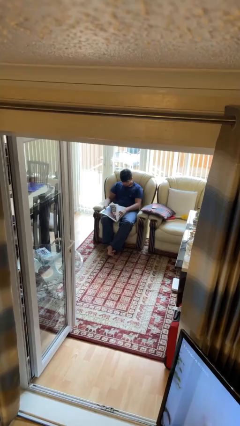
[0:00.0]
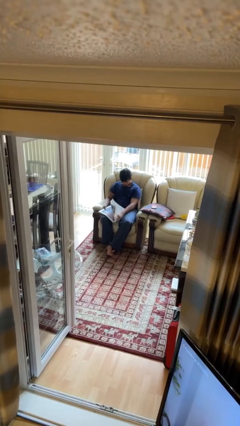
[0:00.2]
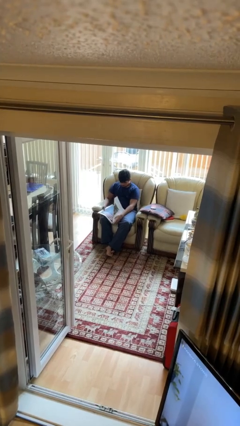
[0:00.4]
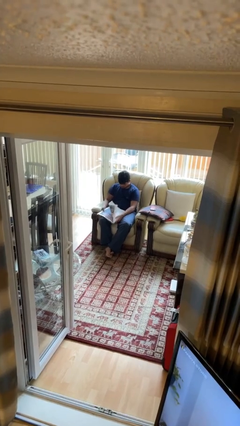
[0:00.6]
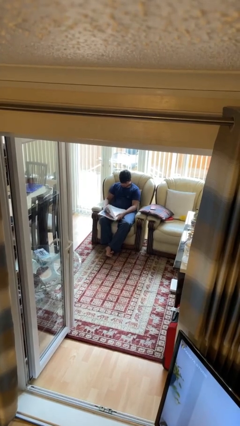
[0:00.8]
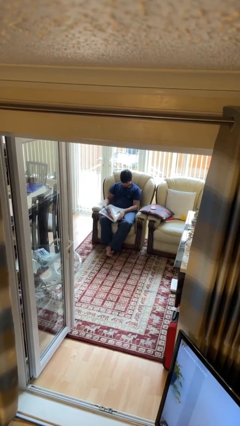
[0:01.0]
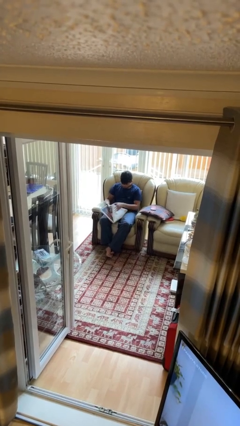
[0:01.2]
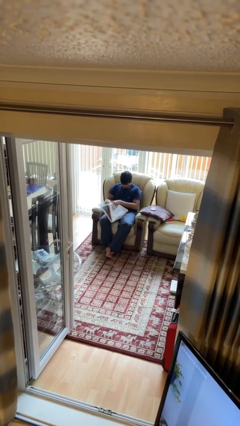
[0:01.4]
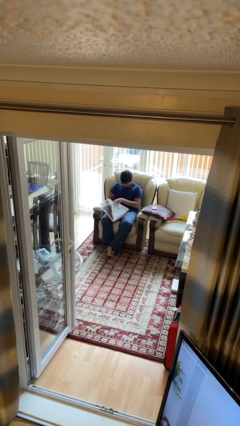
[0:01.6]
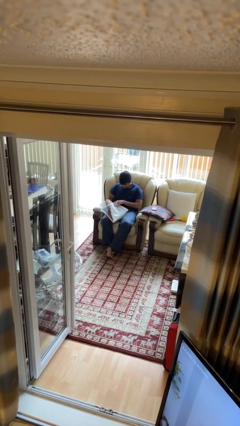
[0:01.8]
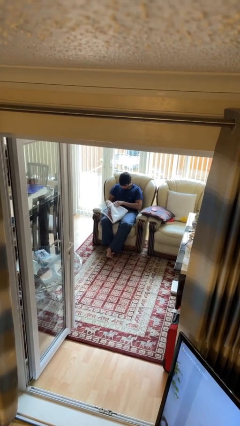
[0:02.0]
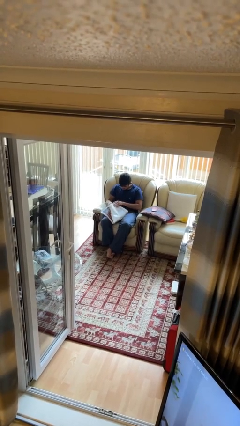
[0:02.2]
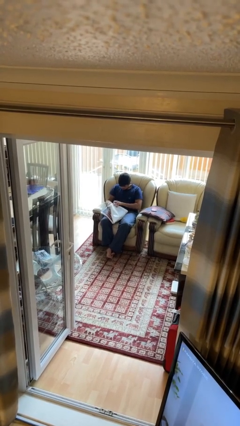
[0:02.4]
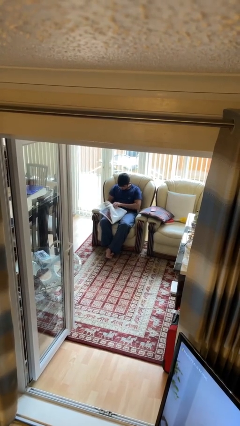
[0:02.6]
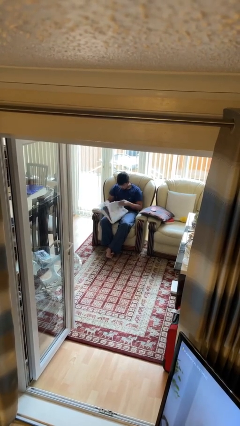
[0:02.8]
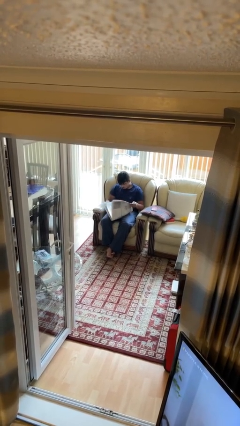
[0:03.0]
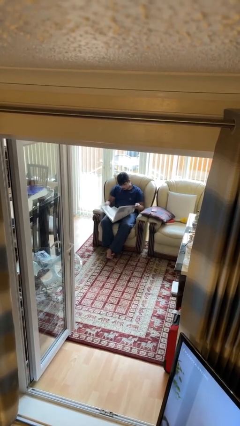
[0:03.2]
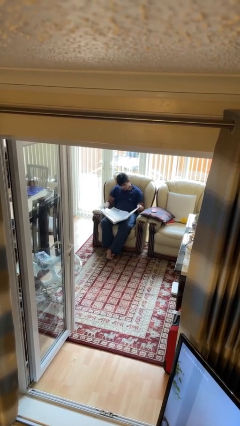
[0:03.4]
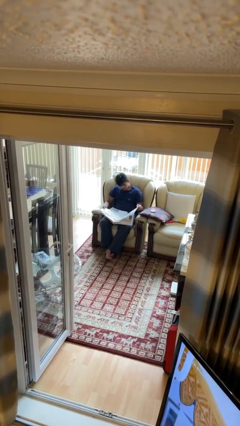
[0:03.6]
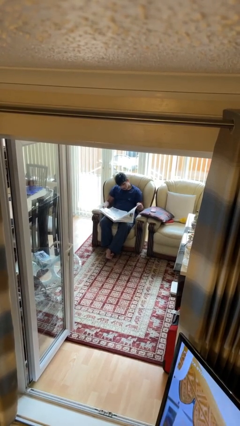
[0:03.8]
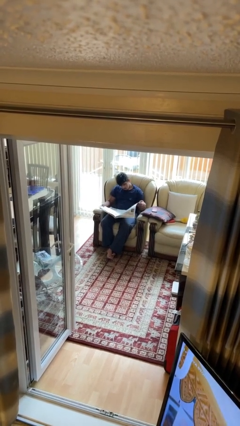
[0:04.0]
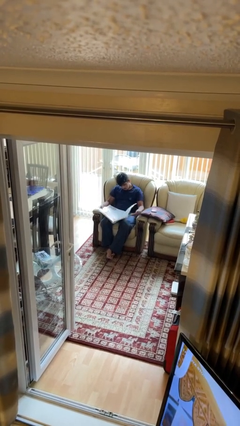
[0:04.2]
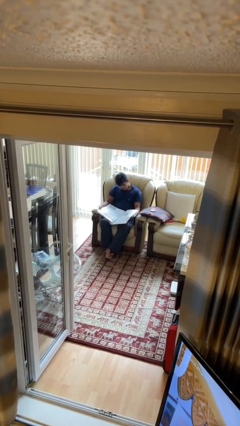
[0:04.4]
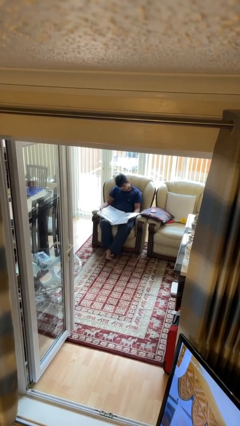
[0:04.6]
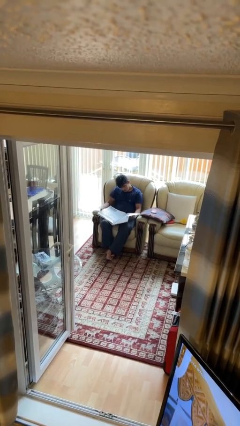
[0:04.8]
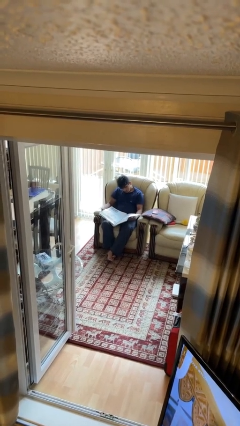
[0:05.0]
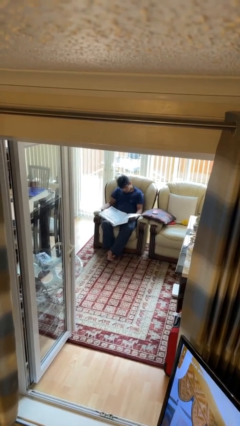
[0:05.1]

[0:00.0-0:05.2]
person reads newspaper

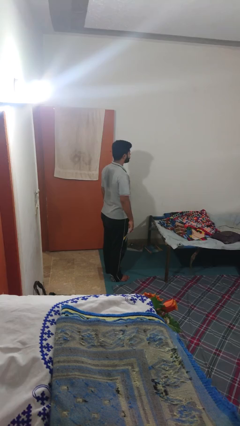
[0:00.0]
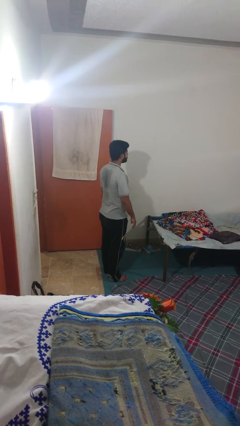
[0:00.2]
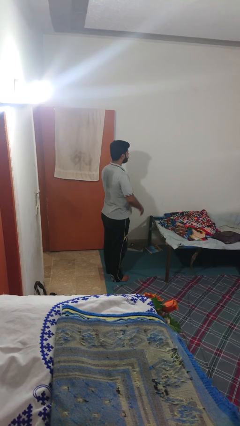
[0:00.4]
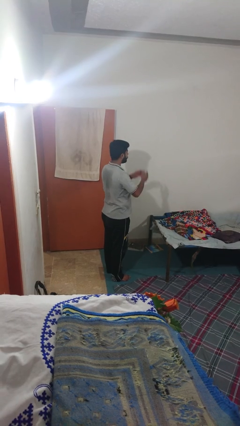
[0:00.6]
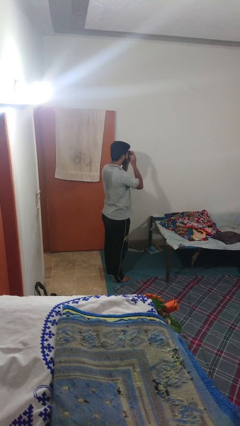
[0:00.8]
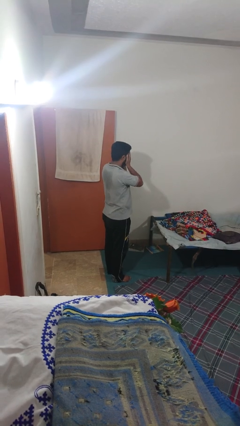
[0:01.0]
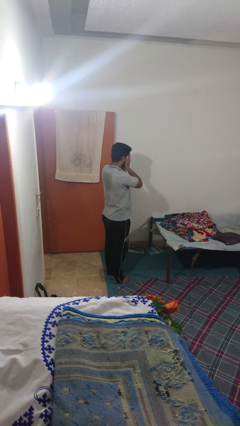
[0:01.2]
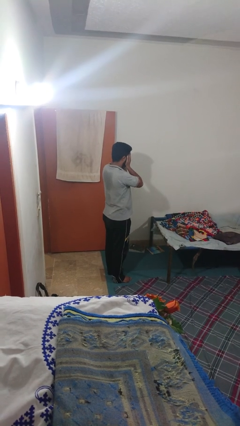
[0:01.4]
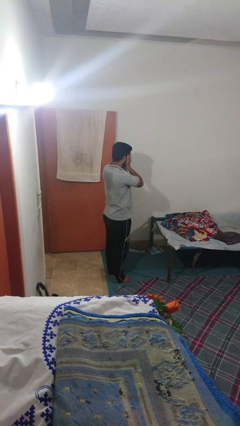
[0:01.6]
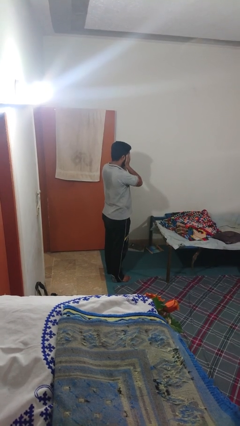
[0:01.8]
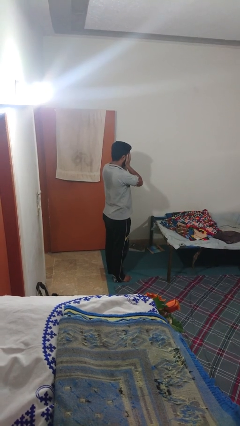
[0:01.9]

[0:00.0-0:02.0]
person covers face with hands

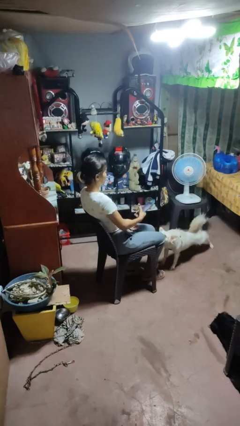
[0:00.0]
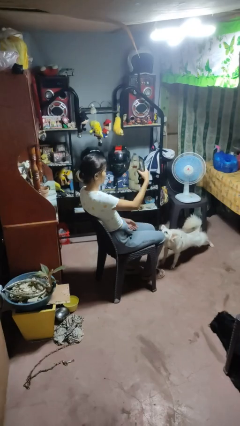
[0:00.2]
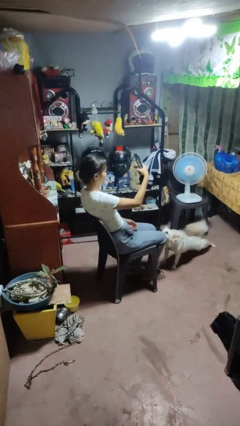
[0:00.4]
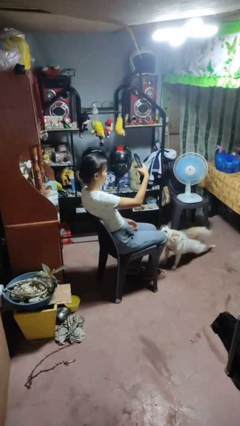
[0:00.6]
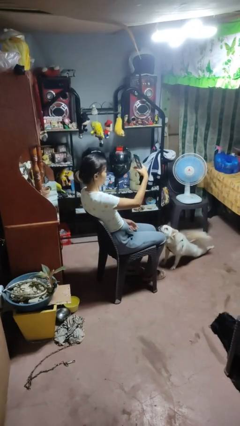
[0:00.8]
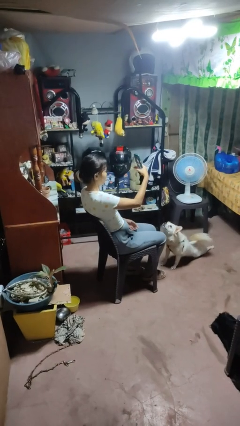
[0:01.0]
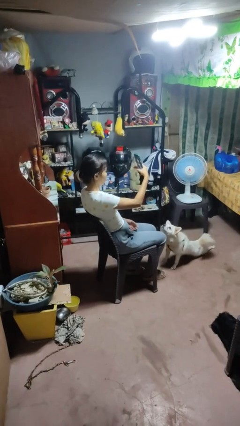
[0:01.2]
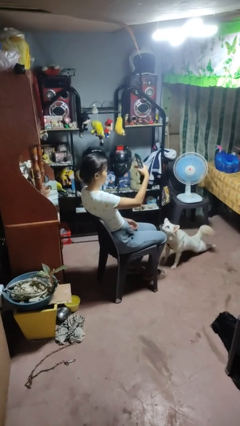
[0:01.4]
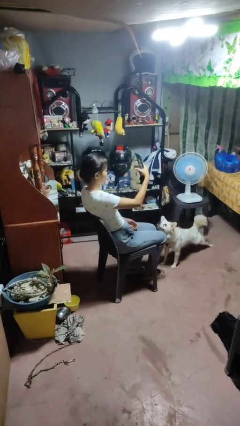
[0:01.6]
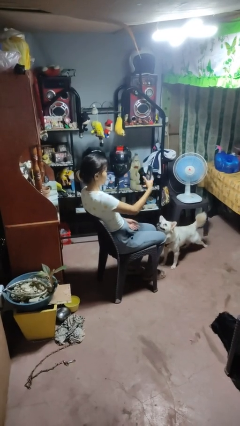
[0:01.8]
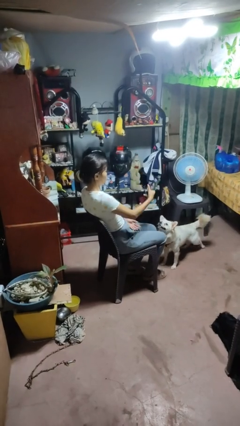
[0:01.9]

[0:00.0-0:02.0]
person takes selfie

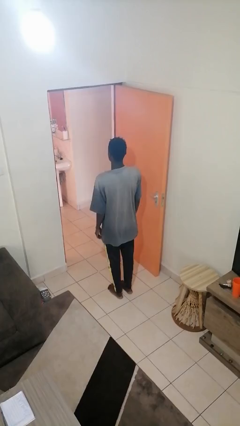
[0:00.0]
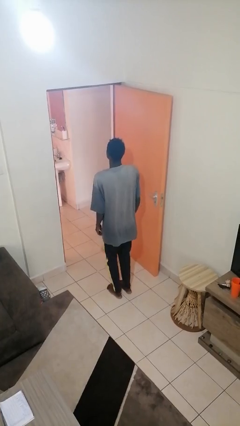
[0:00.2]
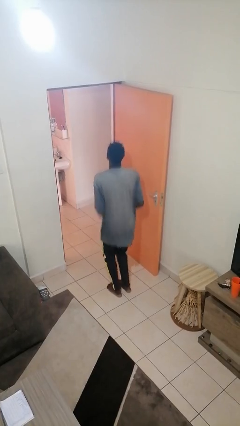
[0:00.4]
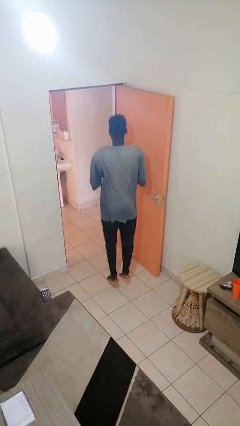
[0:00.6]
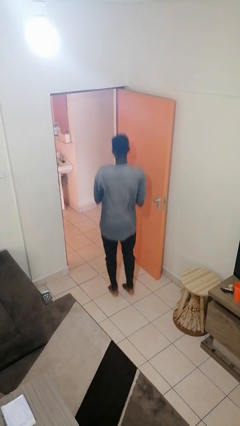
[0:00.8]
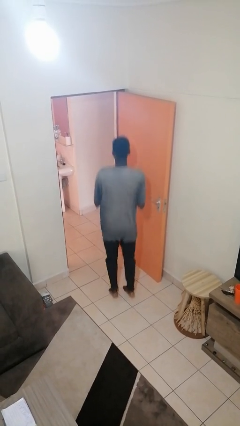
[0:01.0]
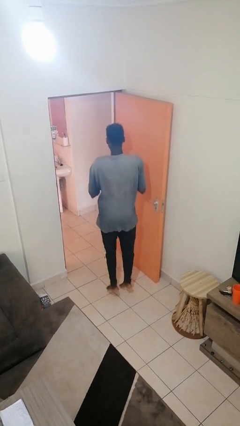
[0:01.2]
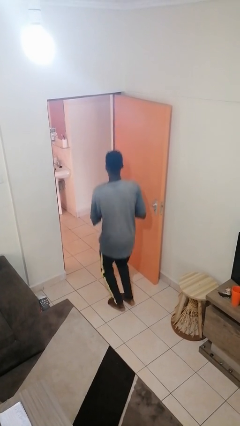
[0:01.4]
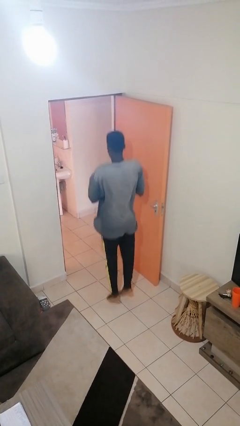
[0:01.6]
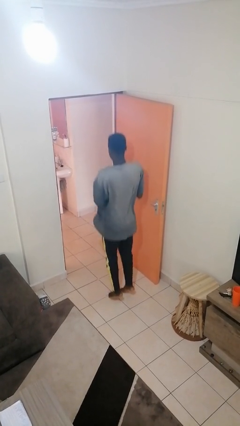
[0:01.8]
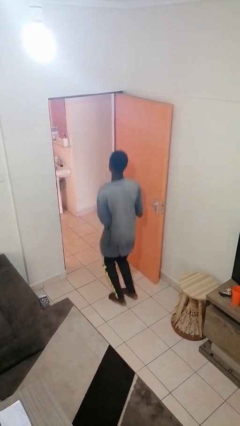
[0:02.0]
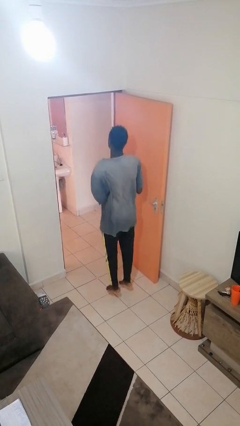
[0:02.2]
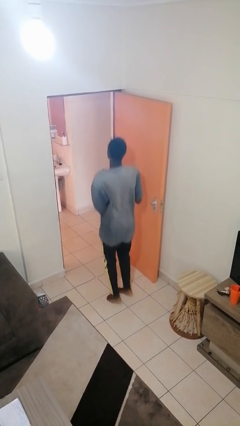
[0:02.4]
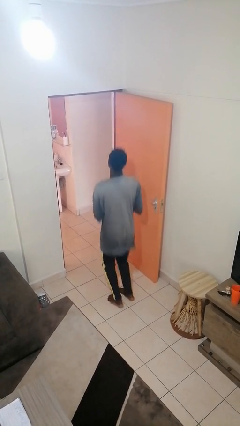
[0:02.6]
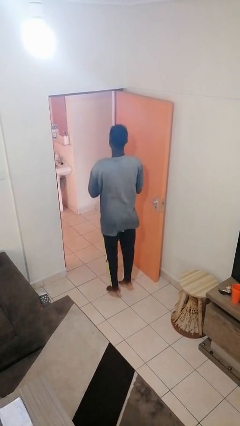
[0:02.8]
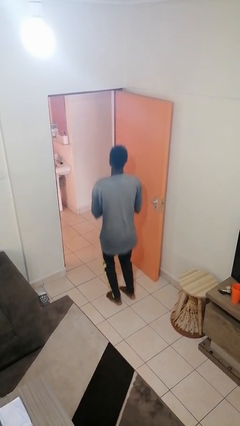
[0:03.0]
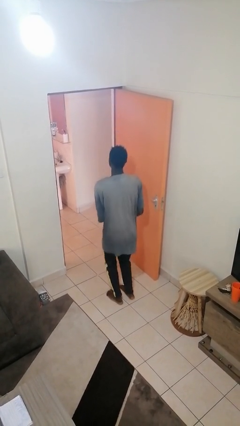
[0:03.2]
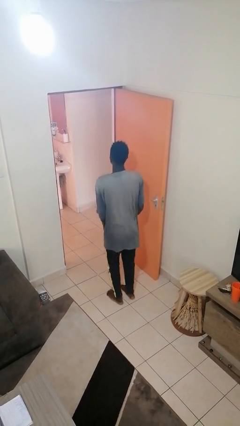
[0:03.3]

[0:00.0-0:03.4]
person jumps

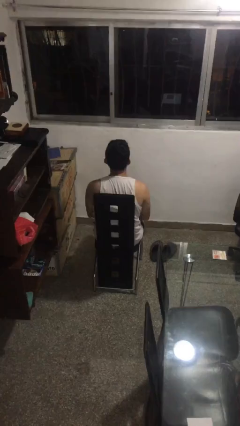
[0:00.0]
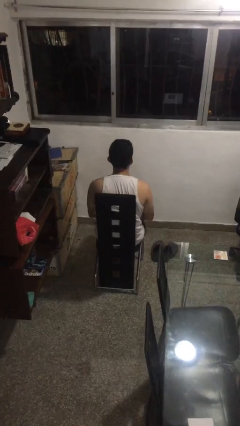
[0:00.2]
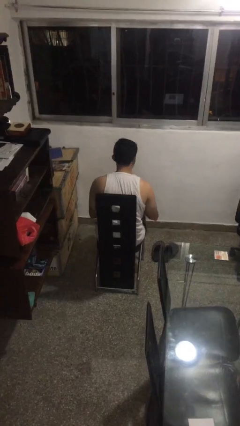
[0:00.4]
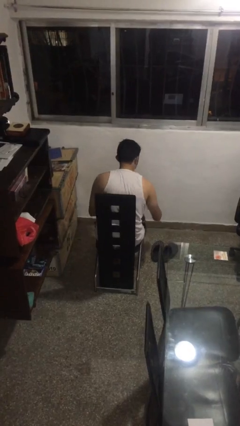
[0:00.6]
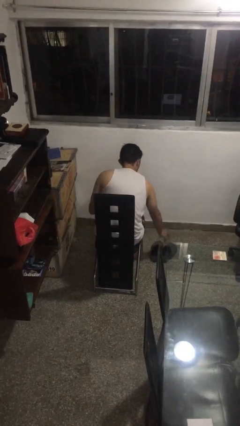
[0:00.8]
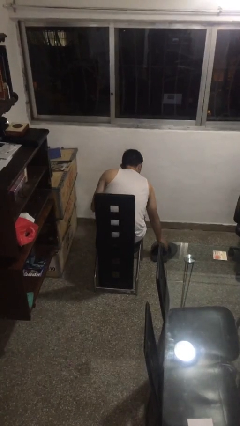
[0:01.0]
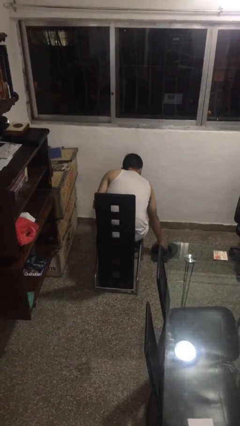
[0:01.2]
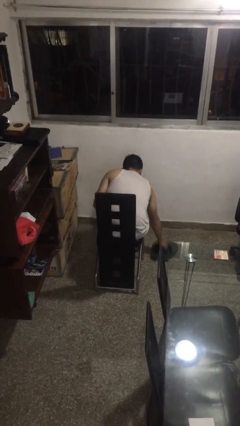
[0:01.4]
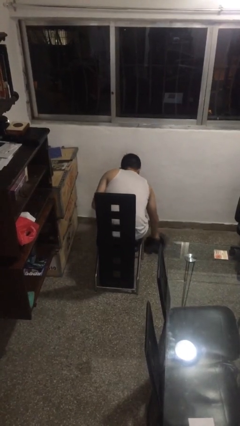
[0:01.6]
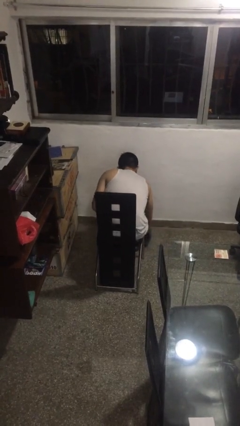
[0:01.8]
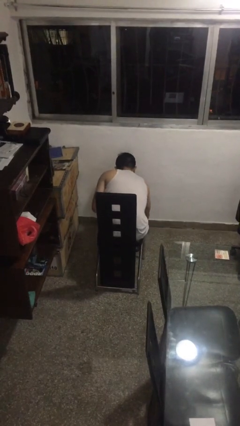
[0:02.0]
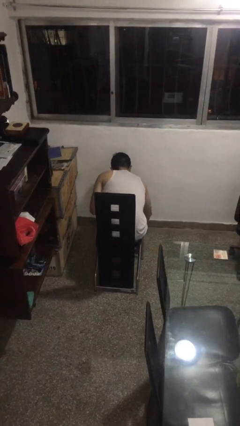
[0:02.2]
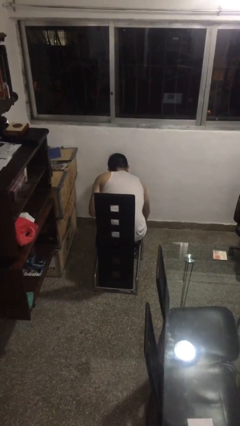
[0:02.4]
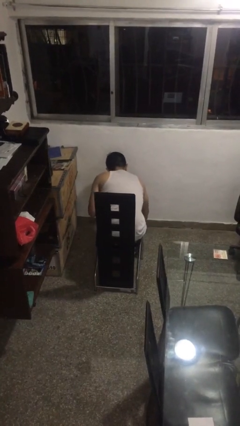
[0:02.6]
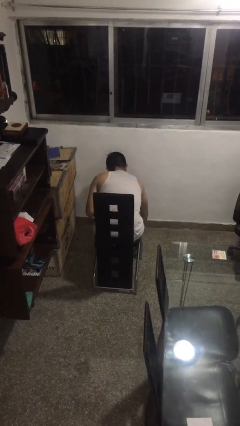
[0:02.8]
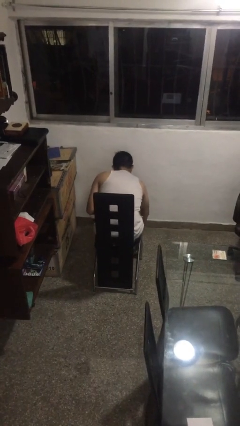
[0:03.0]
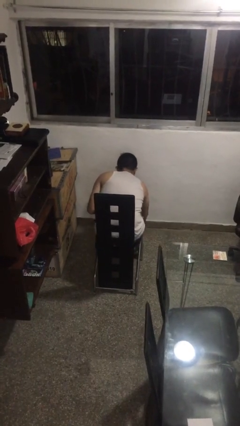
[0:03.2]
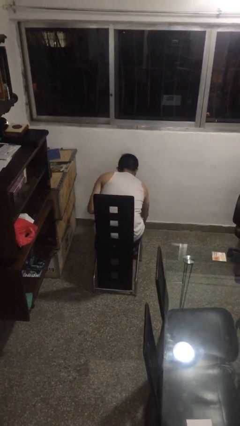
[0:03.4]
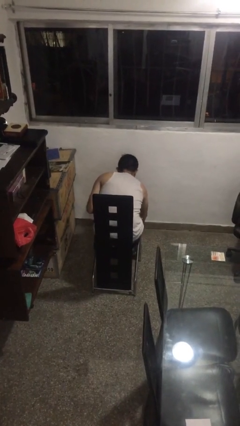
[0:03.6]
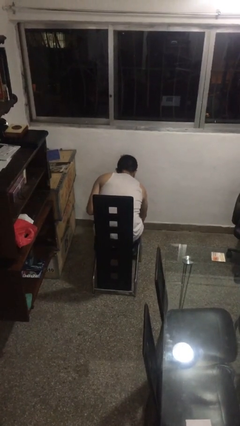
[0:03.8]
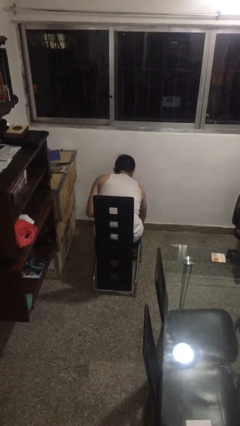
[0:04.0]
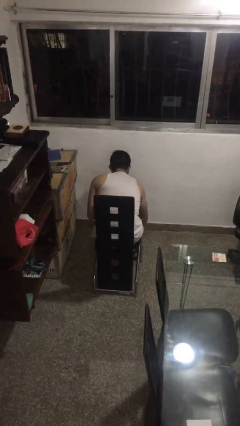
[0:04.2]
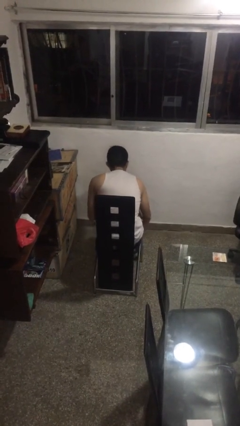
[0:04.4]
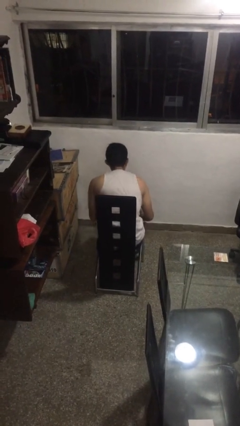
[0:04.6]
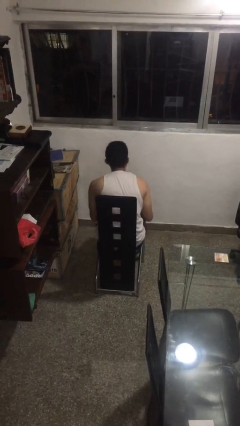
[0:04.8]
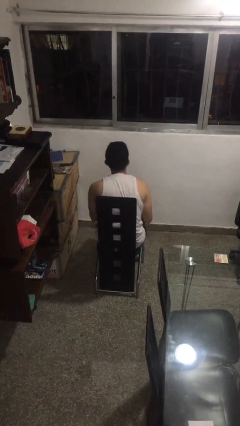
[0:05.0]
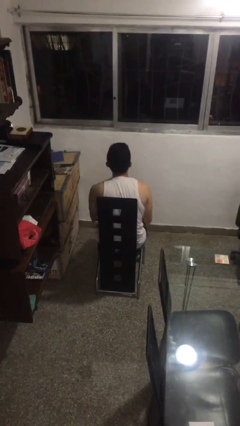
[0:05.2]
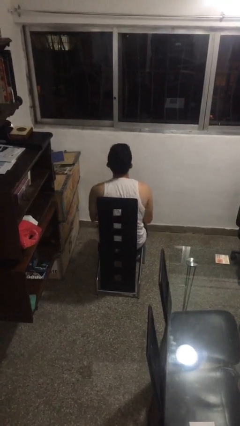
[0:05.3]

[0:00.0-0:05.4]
person puts on shoes
